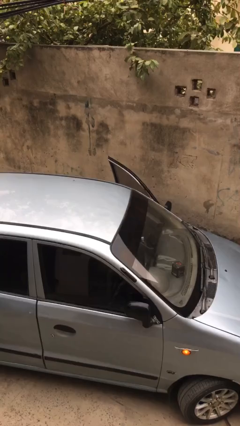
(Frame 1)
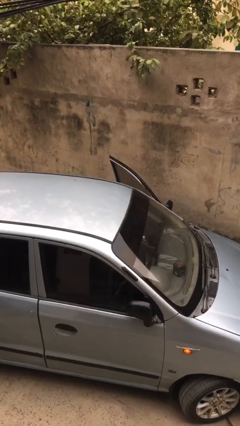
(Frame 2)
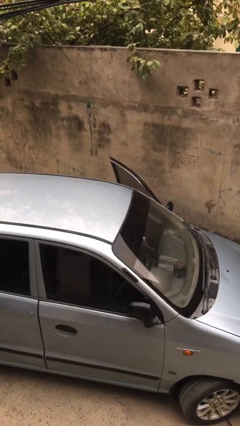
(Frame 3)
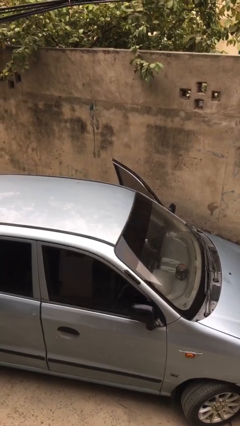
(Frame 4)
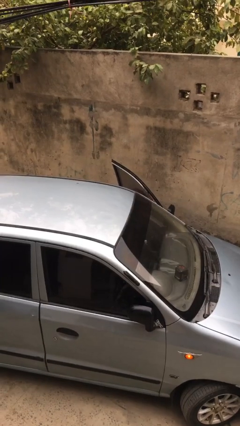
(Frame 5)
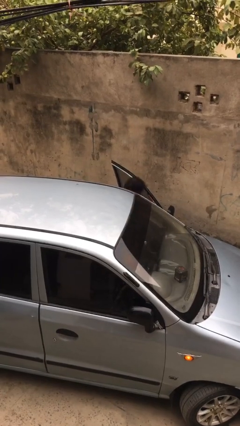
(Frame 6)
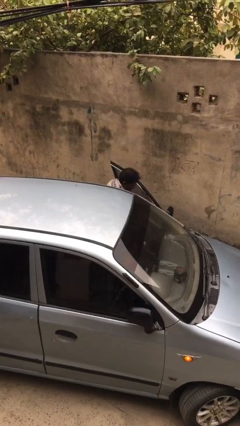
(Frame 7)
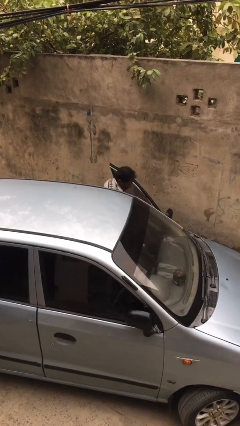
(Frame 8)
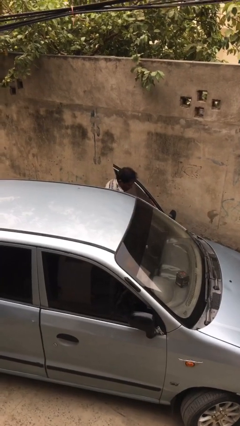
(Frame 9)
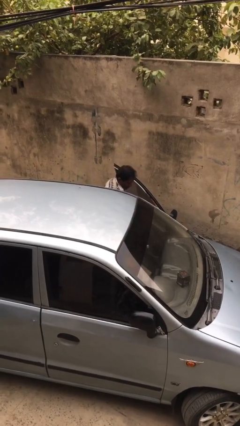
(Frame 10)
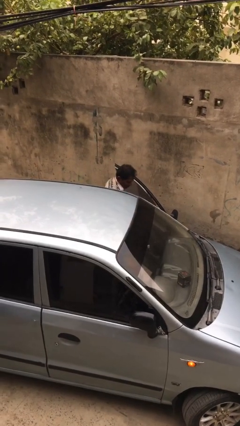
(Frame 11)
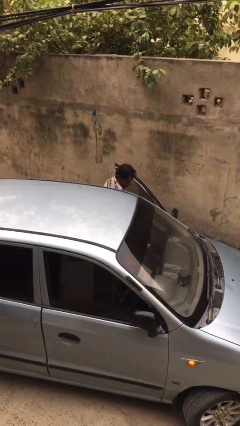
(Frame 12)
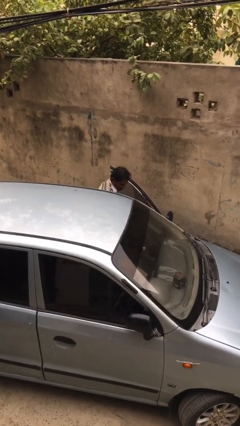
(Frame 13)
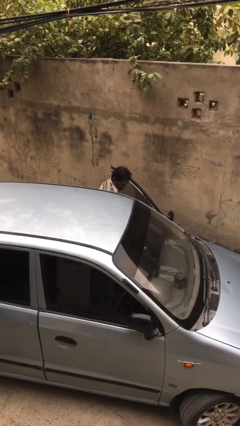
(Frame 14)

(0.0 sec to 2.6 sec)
person exits car

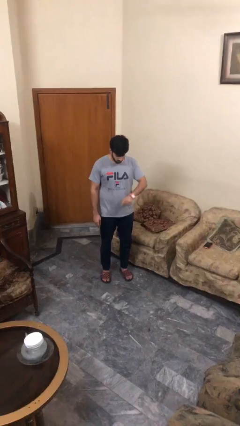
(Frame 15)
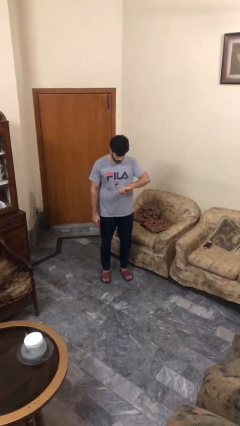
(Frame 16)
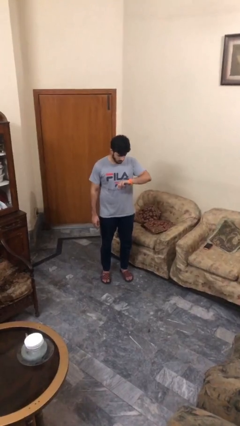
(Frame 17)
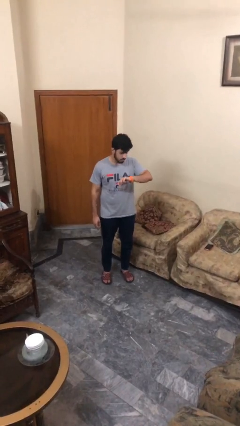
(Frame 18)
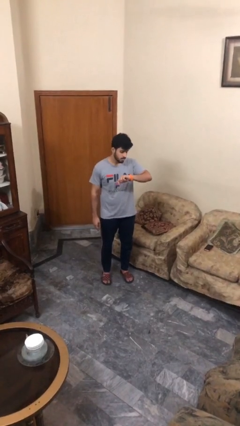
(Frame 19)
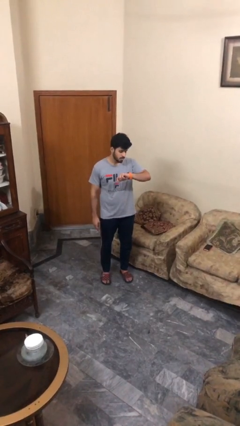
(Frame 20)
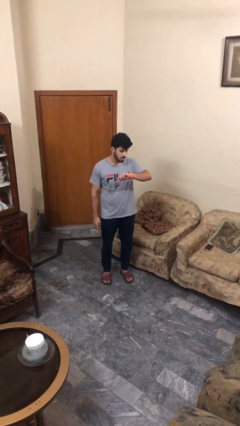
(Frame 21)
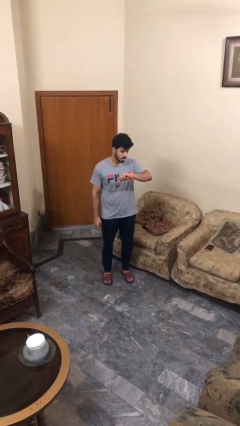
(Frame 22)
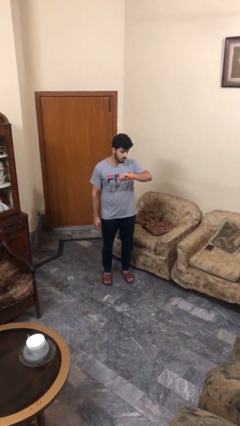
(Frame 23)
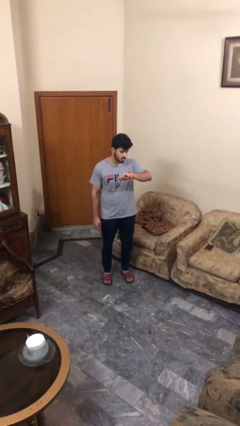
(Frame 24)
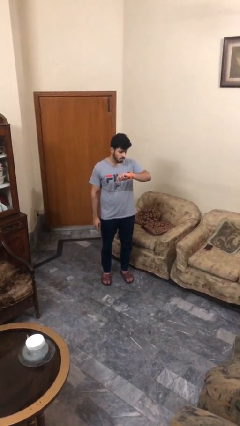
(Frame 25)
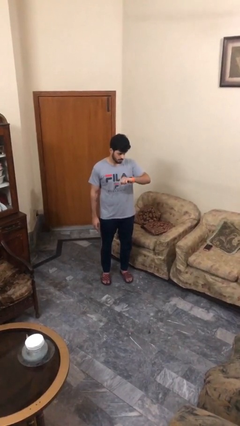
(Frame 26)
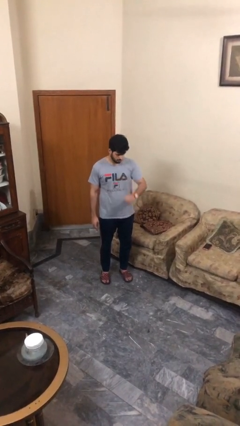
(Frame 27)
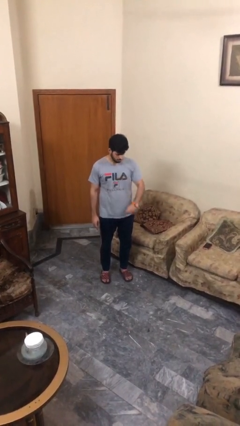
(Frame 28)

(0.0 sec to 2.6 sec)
person looks at wristwatch

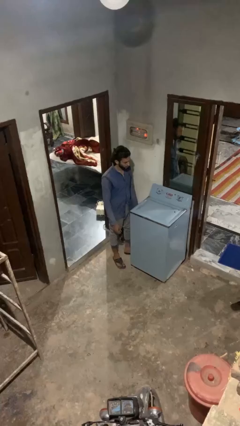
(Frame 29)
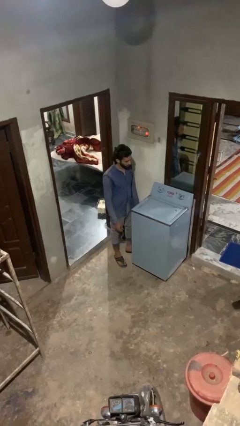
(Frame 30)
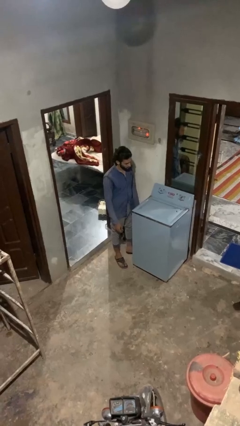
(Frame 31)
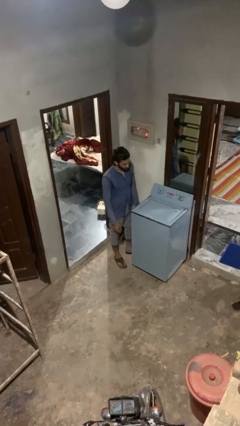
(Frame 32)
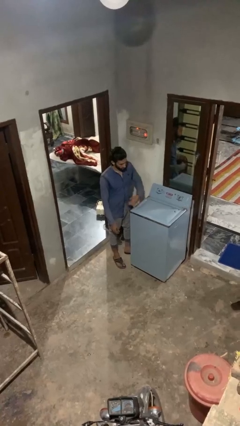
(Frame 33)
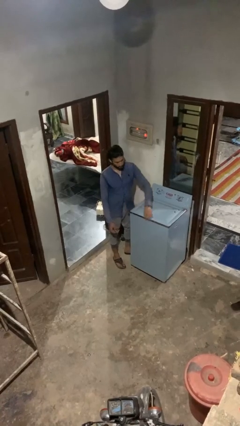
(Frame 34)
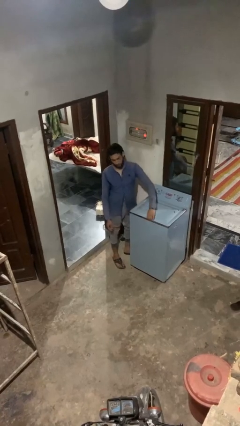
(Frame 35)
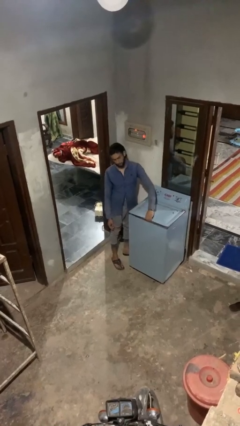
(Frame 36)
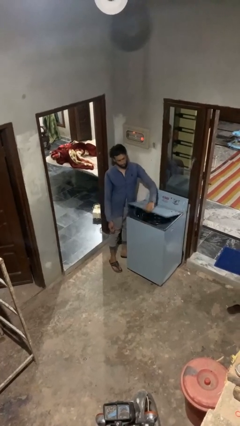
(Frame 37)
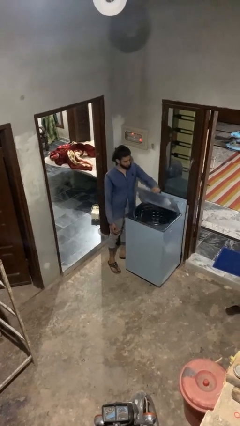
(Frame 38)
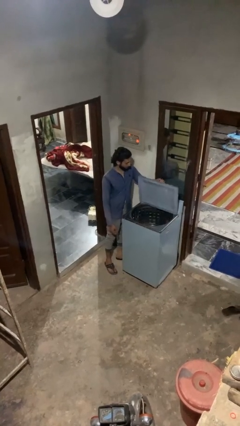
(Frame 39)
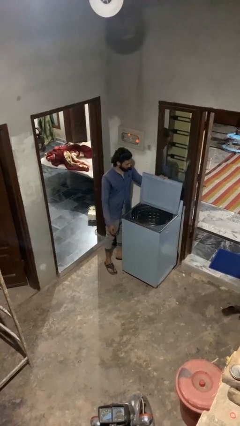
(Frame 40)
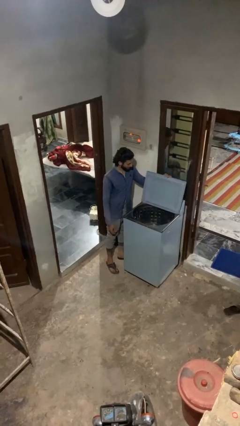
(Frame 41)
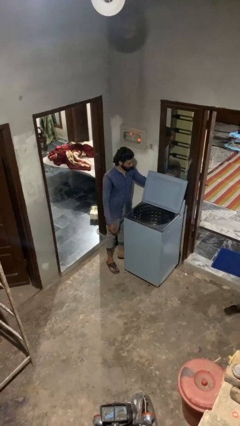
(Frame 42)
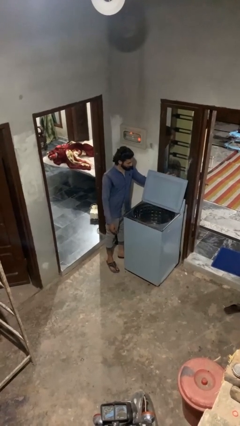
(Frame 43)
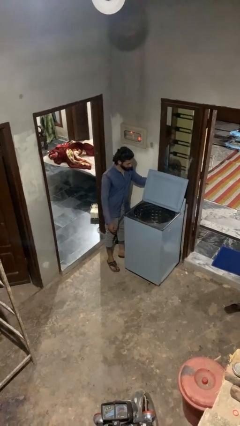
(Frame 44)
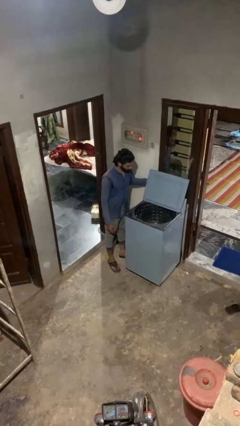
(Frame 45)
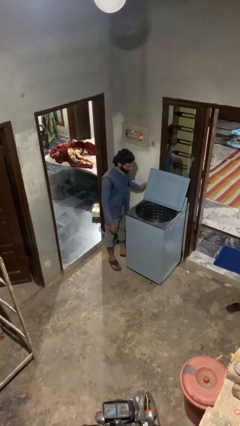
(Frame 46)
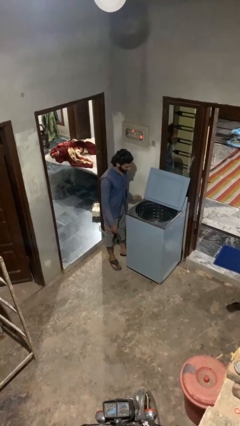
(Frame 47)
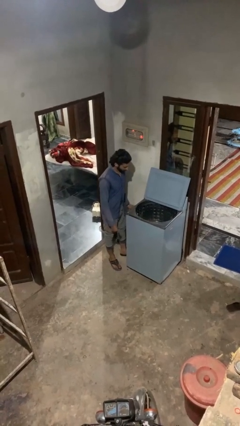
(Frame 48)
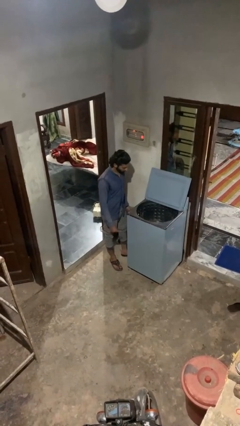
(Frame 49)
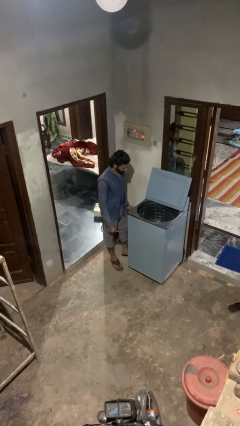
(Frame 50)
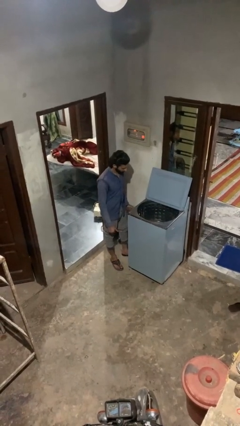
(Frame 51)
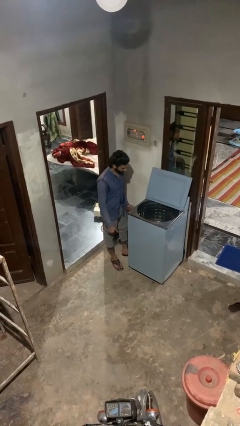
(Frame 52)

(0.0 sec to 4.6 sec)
person opens clothes washer

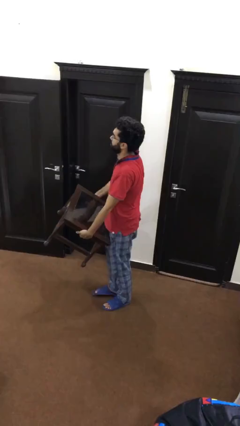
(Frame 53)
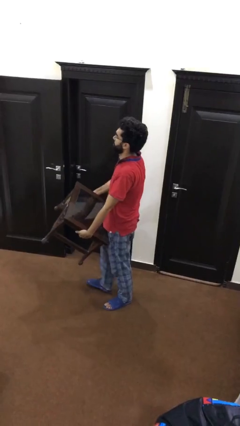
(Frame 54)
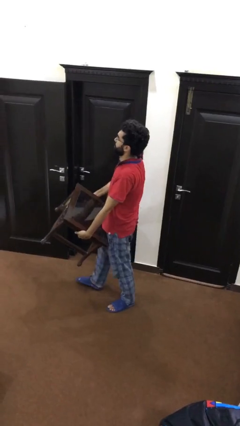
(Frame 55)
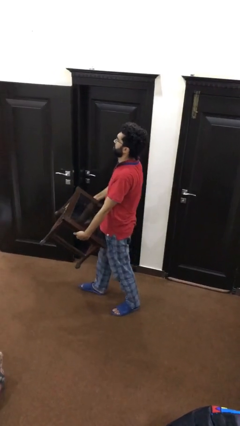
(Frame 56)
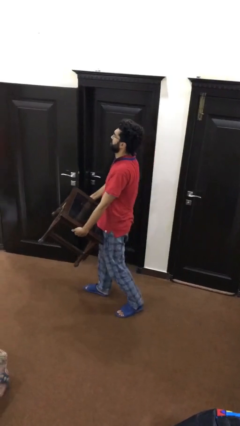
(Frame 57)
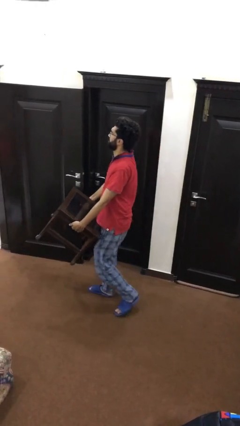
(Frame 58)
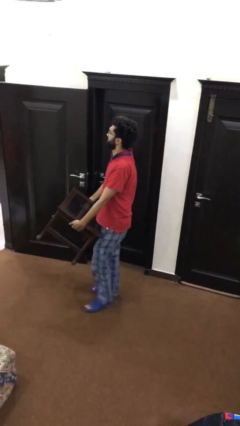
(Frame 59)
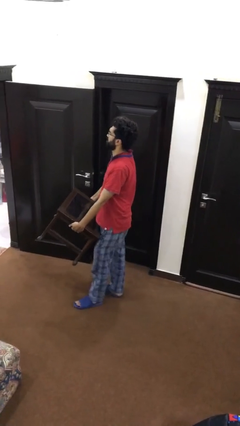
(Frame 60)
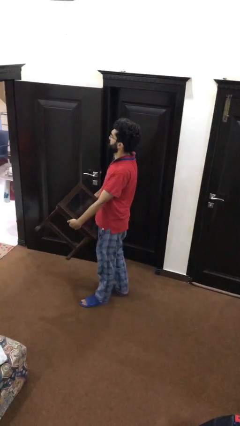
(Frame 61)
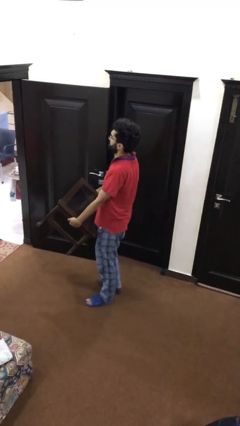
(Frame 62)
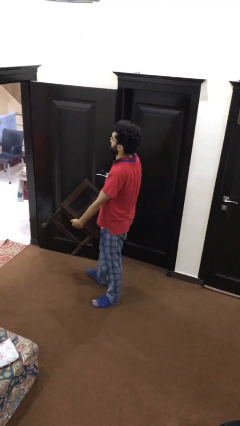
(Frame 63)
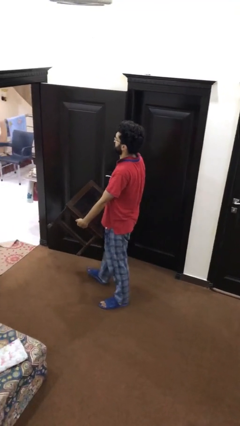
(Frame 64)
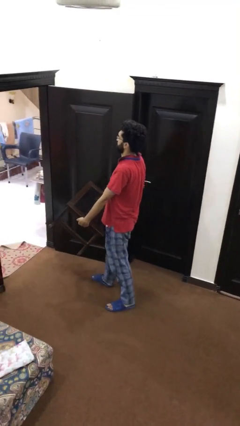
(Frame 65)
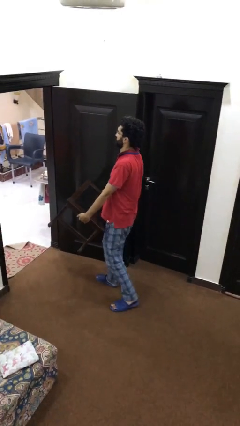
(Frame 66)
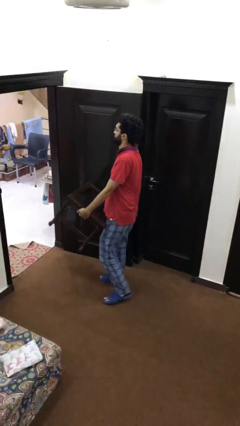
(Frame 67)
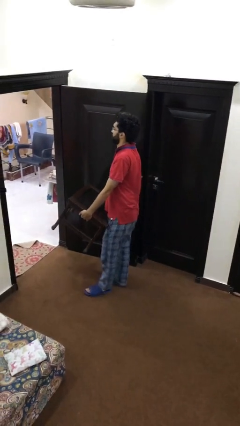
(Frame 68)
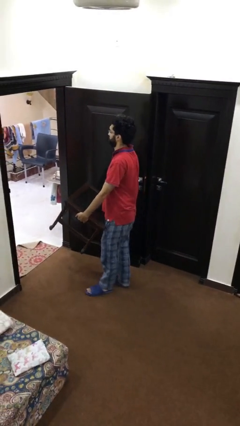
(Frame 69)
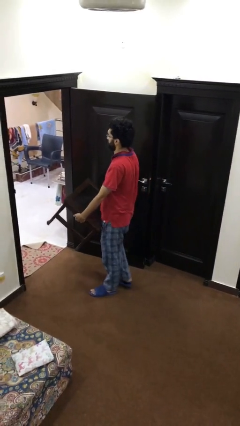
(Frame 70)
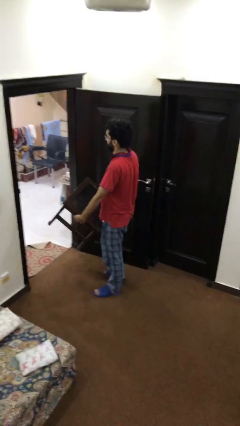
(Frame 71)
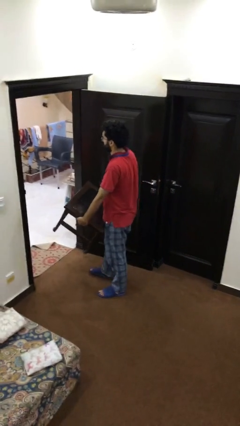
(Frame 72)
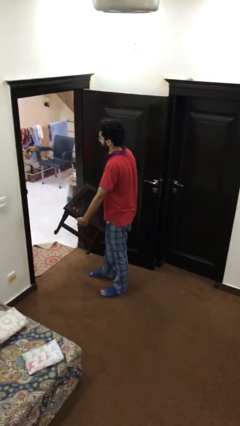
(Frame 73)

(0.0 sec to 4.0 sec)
person carries heavy object

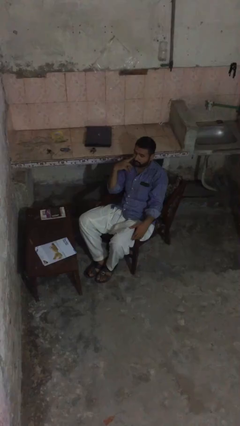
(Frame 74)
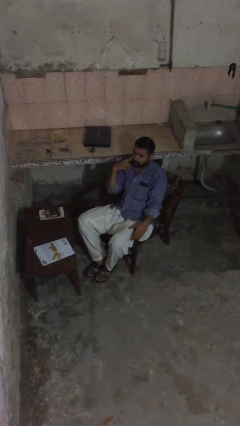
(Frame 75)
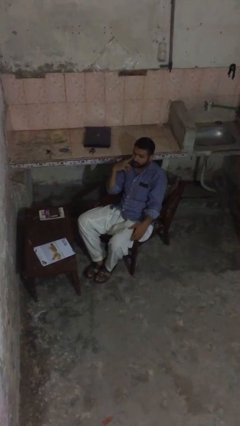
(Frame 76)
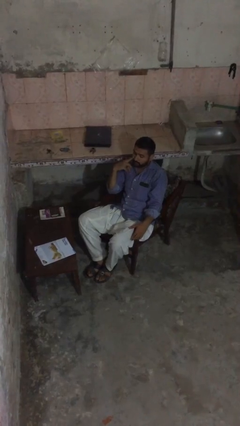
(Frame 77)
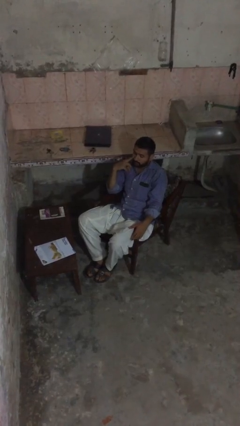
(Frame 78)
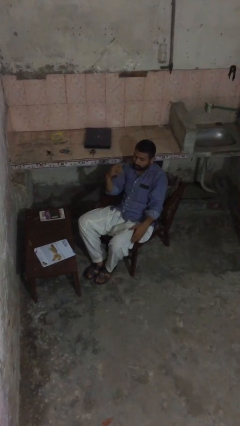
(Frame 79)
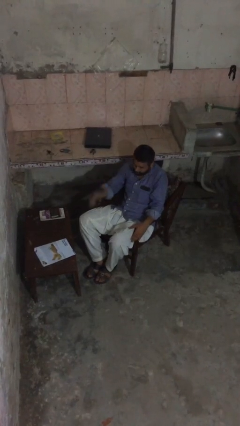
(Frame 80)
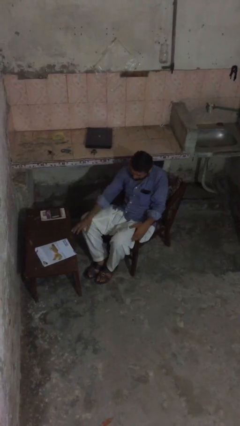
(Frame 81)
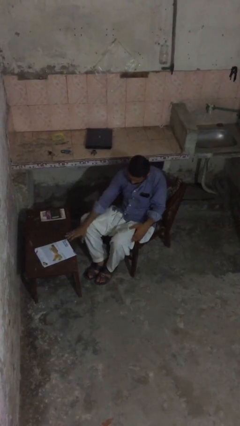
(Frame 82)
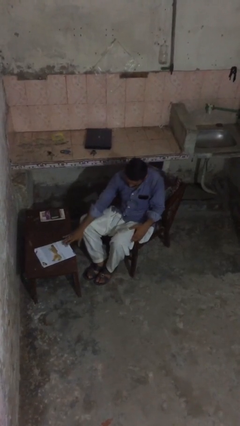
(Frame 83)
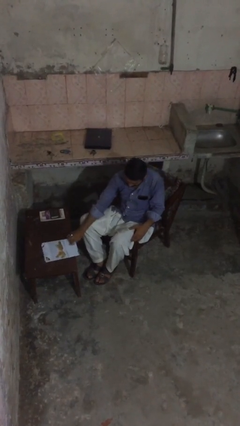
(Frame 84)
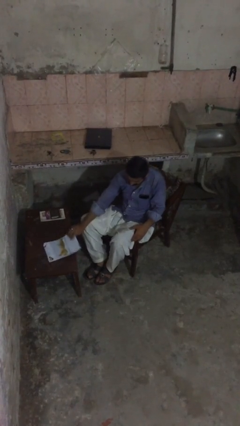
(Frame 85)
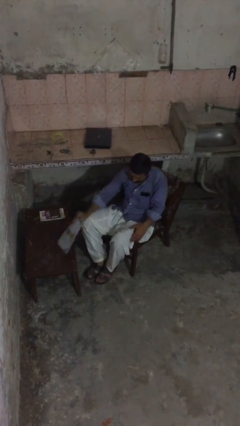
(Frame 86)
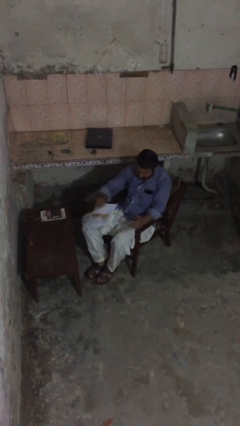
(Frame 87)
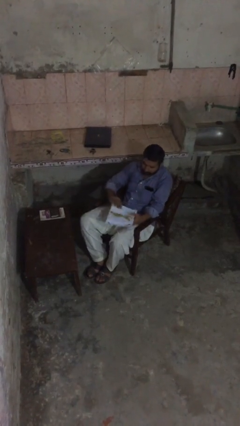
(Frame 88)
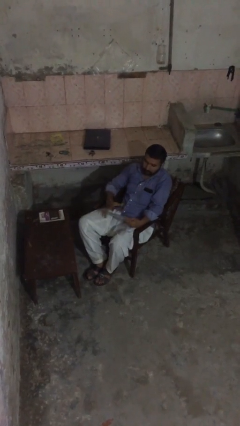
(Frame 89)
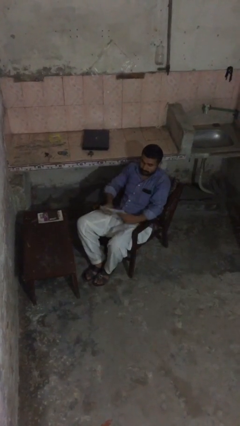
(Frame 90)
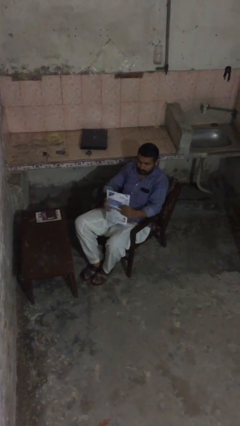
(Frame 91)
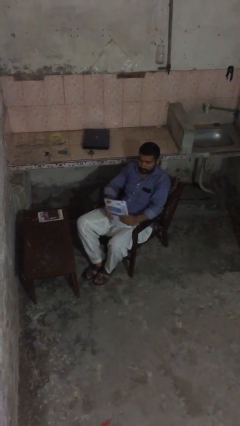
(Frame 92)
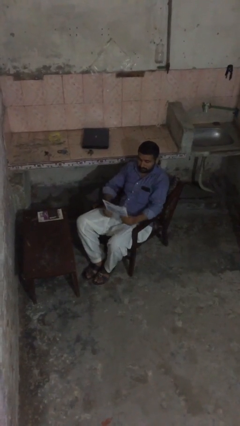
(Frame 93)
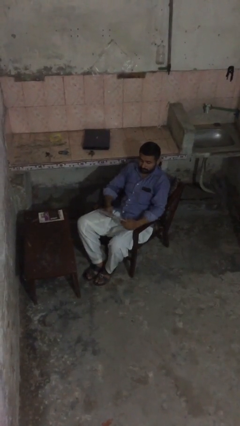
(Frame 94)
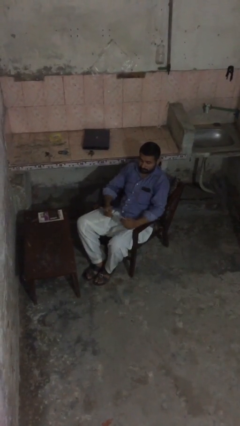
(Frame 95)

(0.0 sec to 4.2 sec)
person picks up object from table
